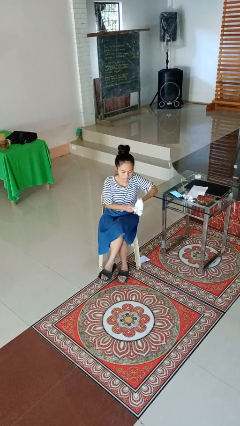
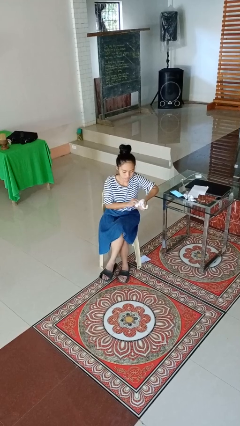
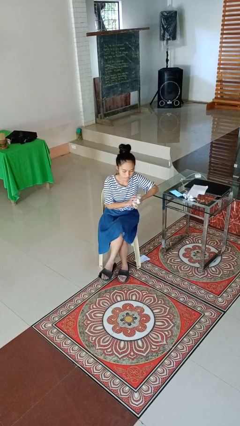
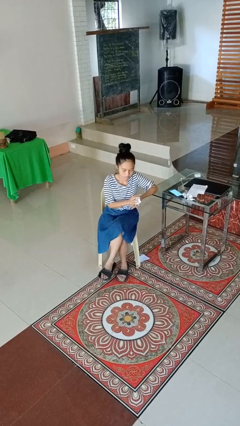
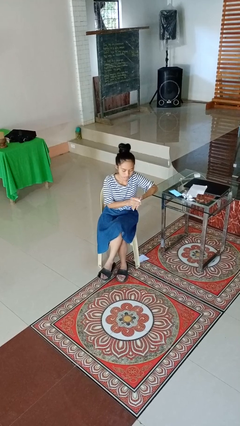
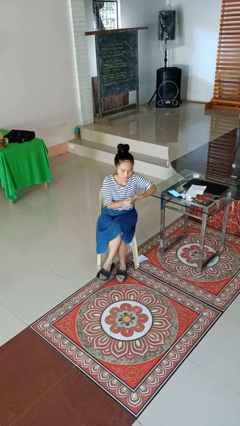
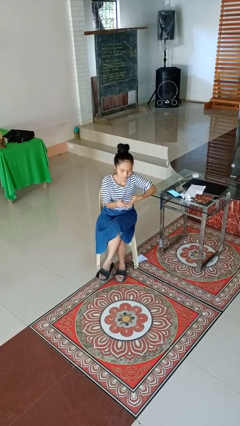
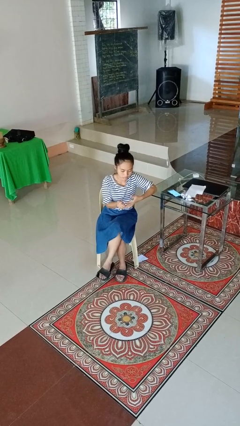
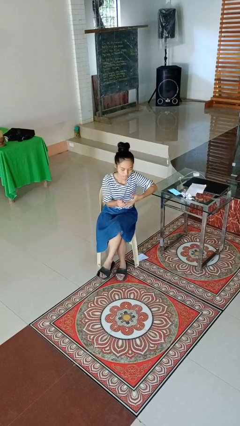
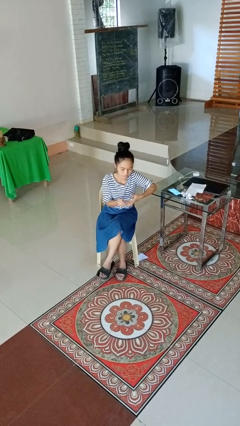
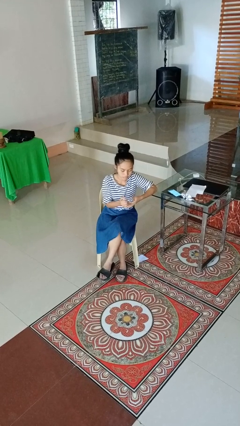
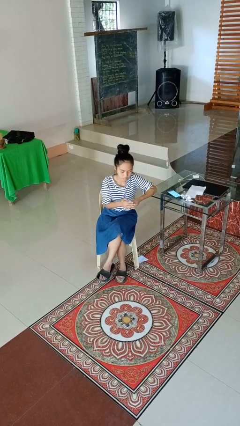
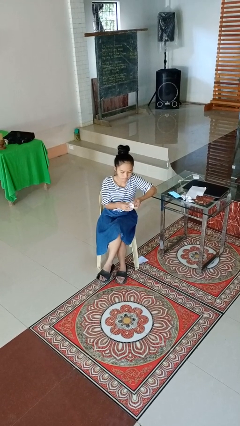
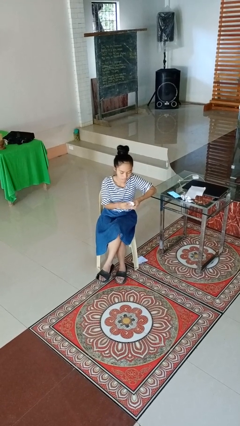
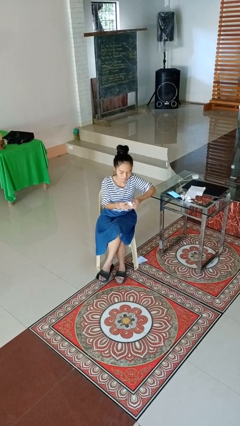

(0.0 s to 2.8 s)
person crumples paper

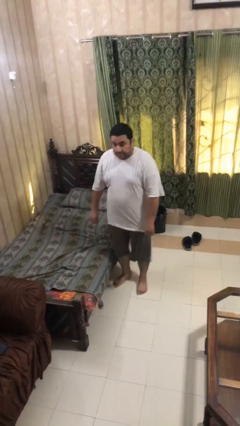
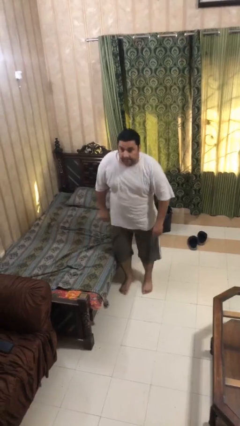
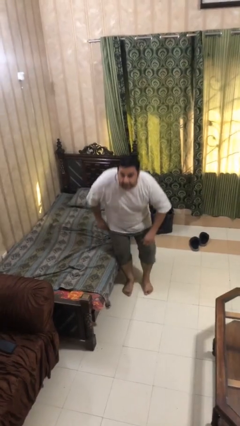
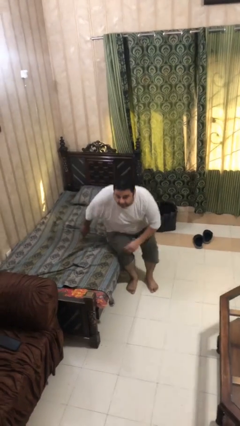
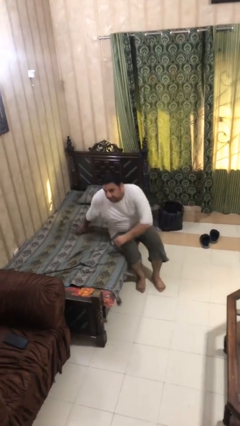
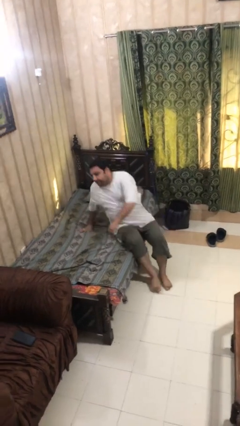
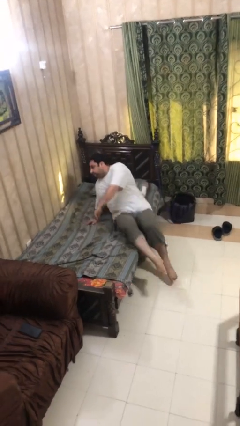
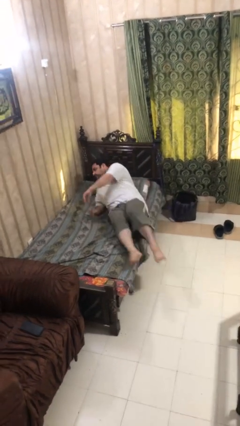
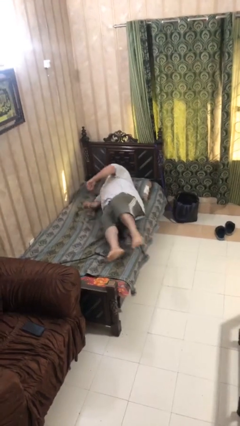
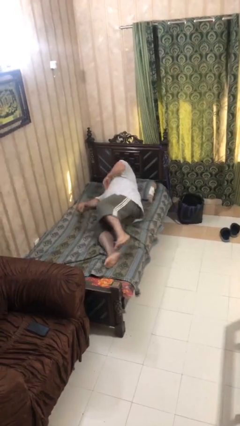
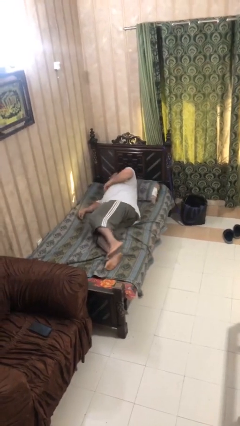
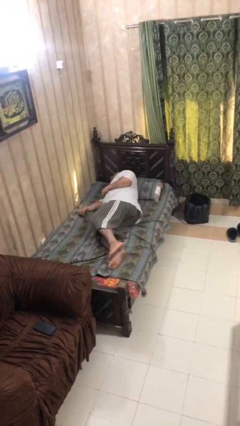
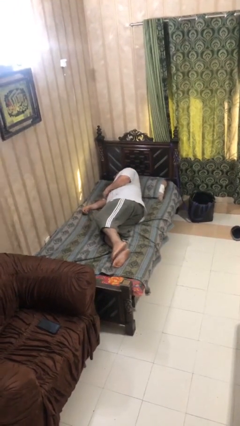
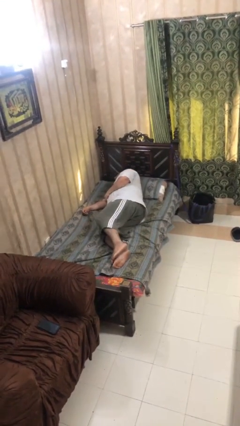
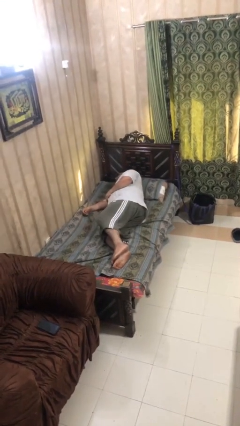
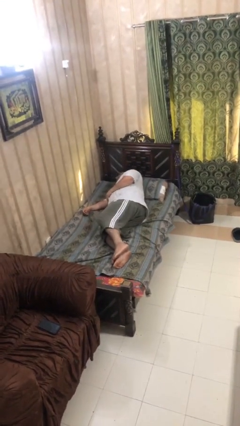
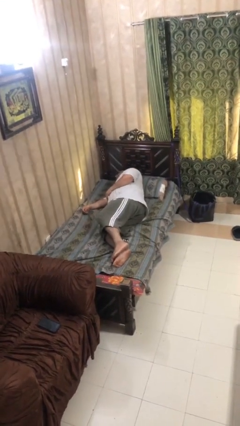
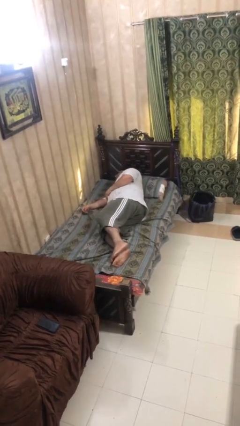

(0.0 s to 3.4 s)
person lies down on bed

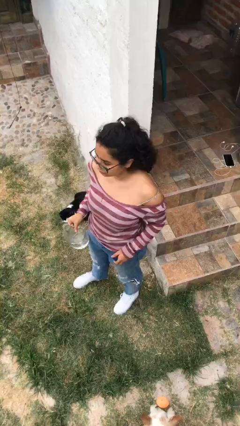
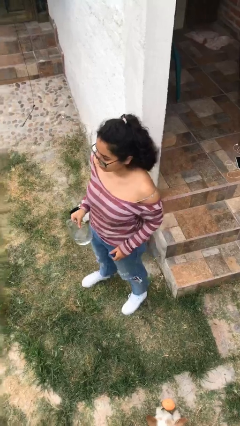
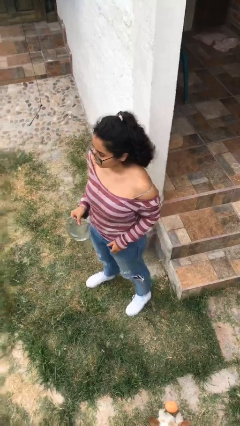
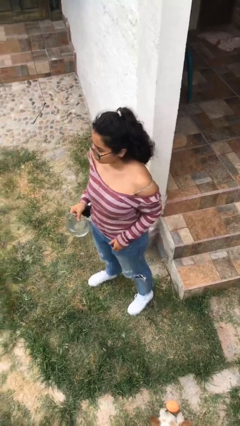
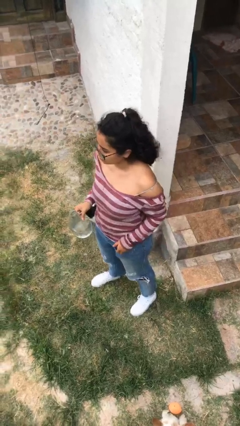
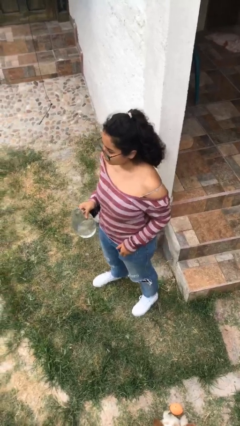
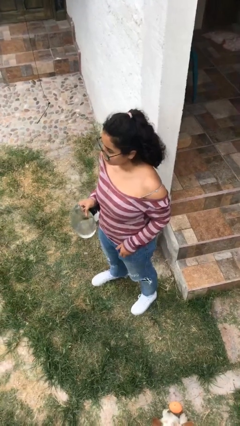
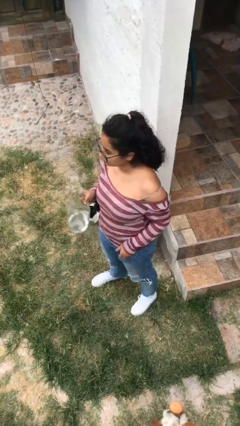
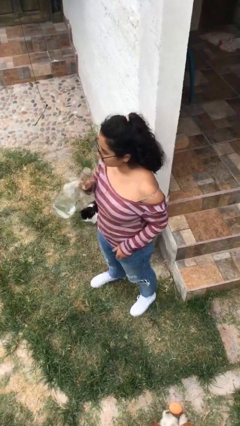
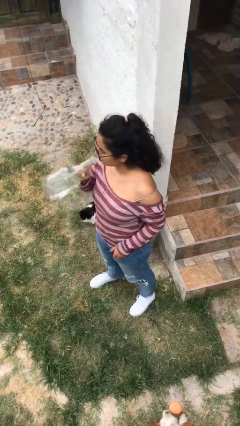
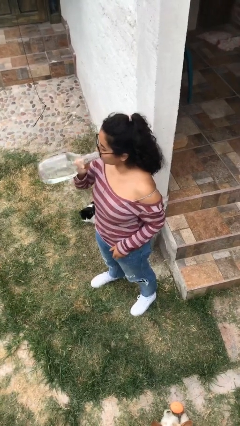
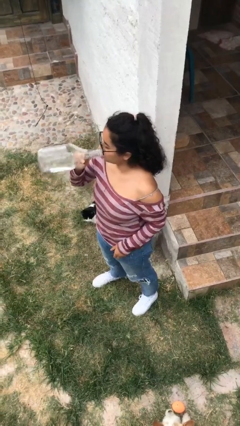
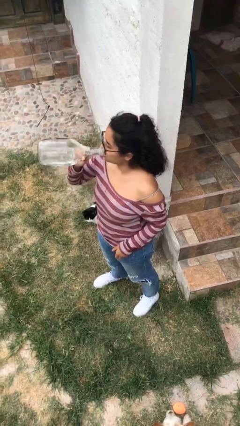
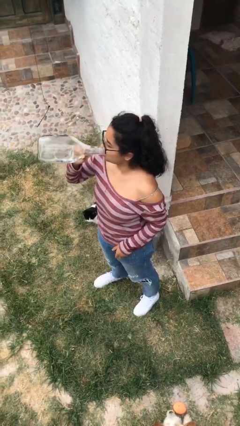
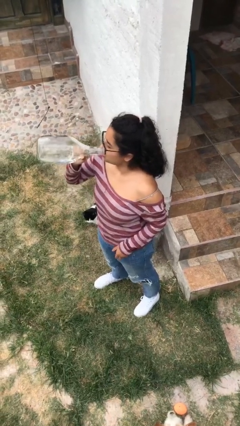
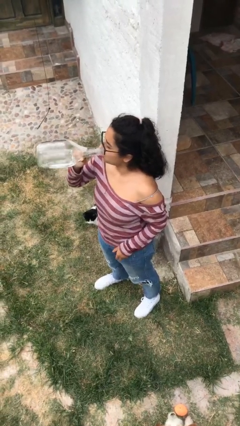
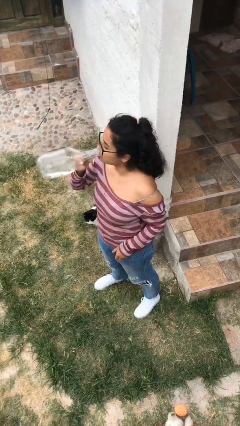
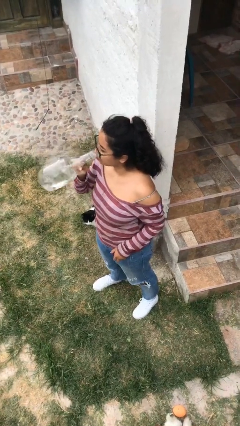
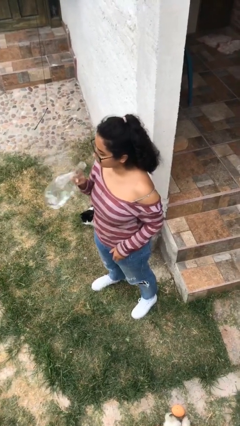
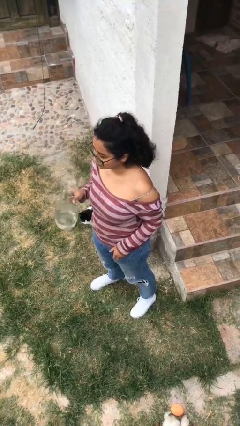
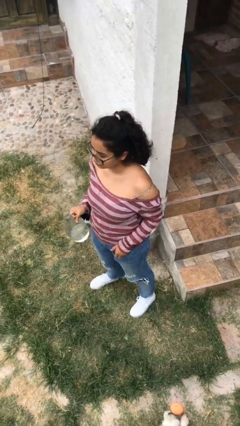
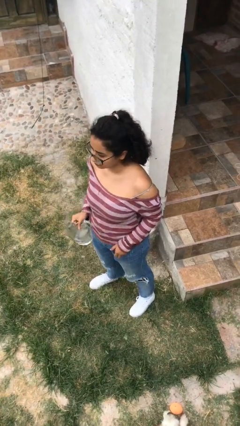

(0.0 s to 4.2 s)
person drinks from bottle

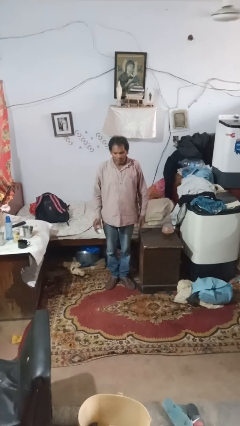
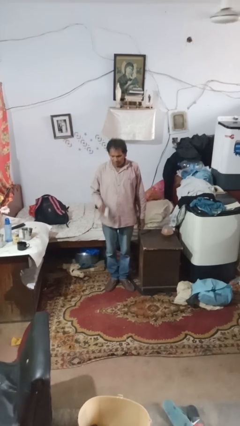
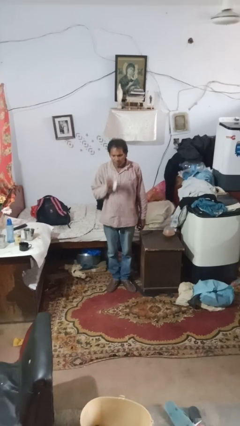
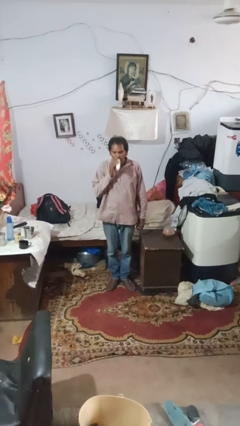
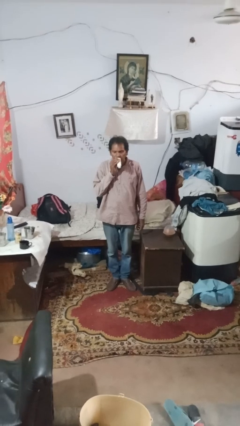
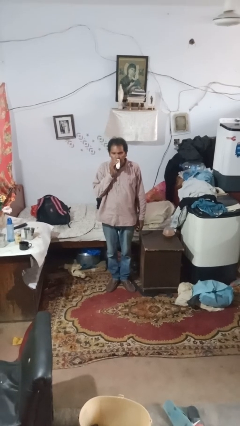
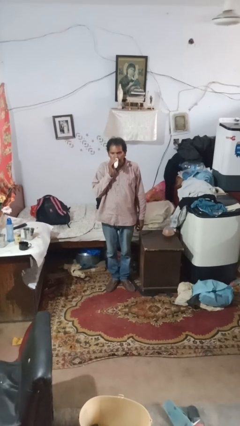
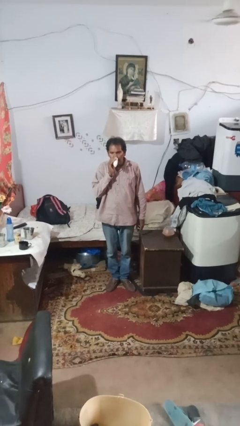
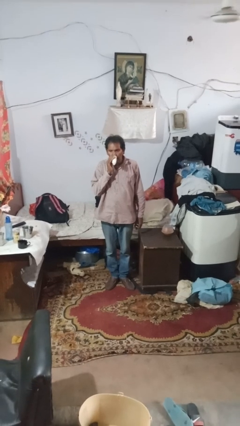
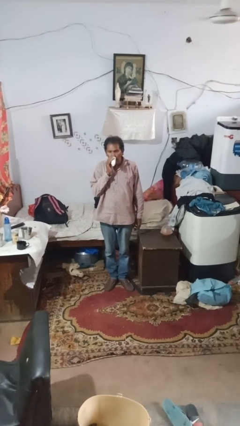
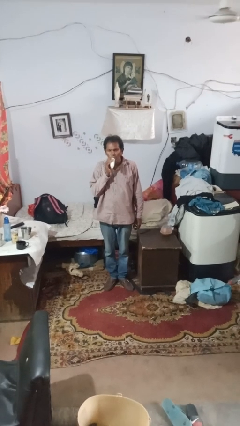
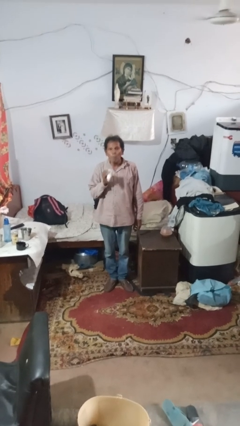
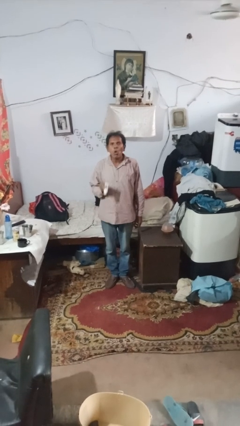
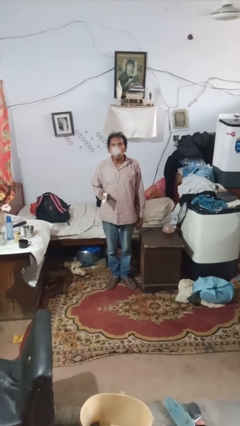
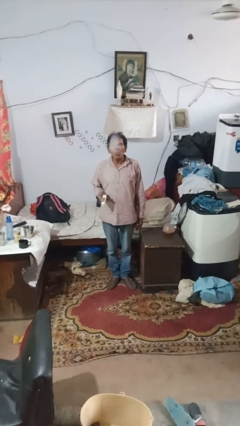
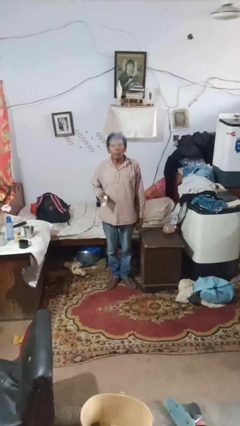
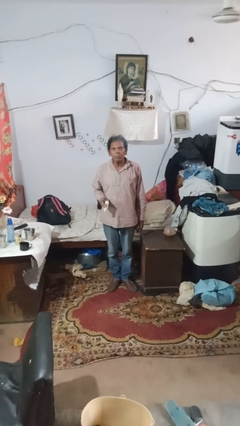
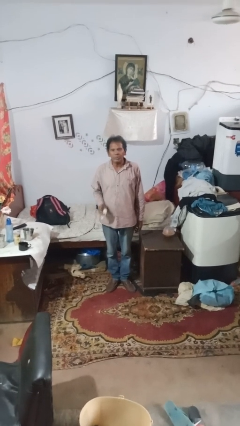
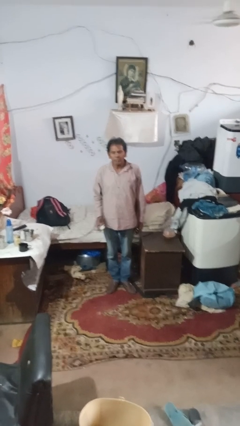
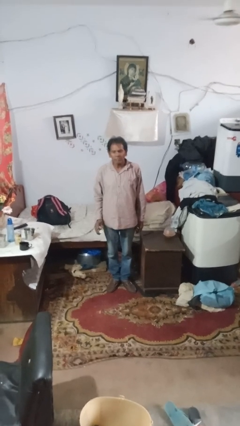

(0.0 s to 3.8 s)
person vapes

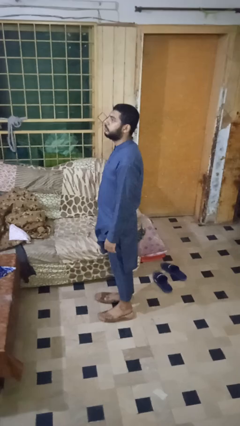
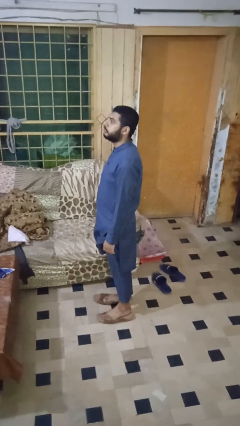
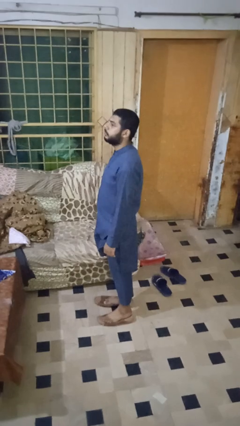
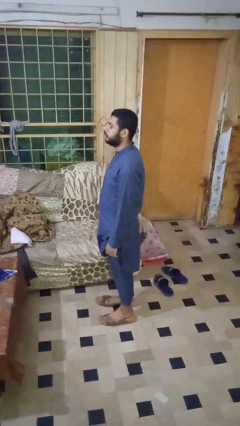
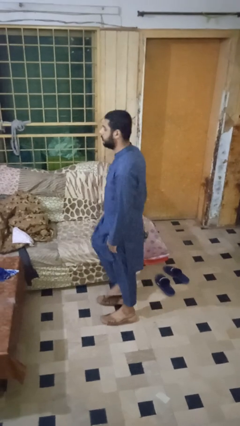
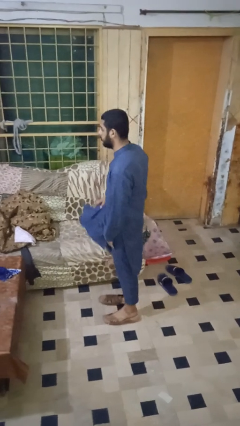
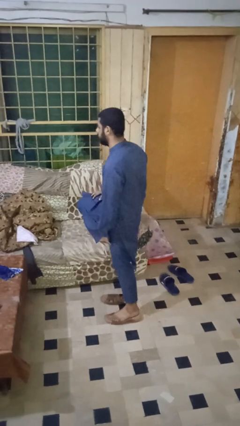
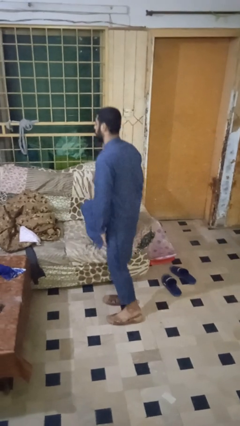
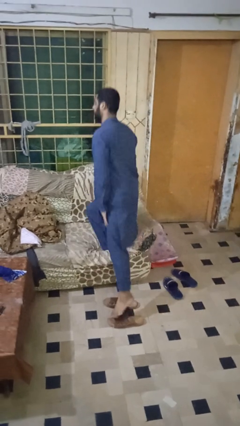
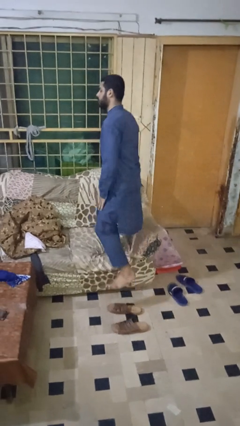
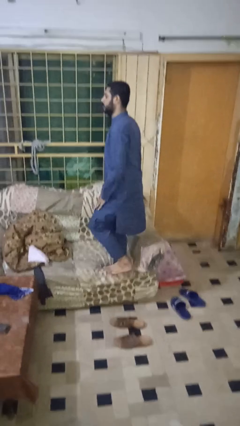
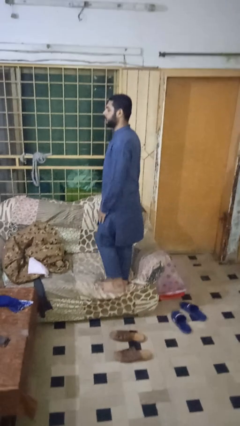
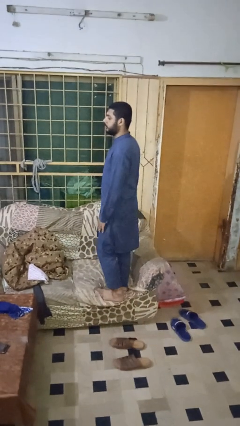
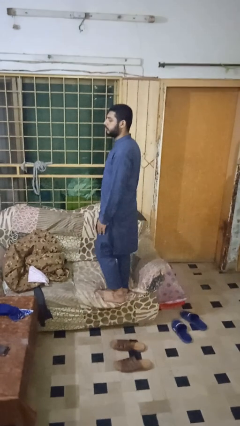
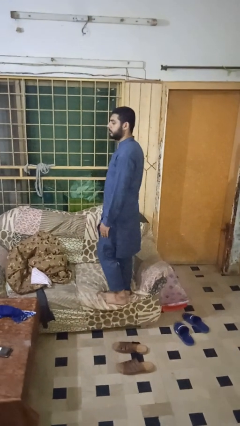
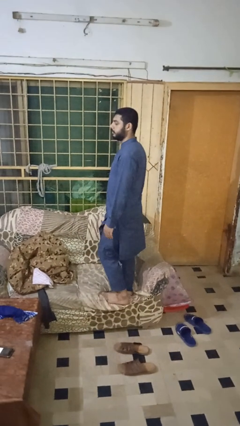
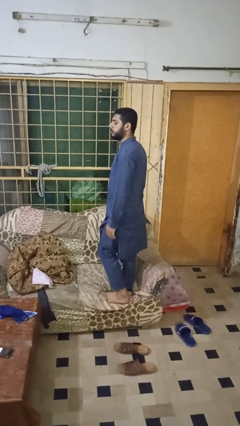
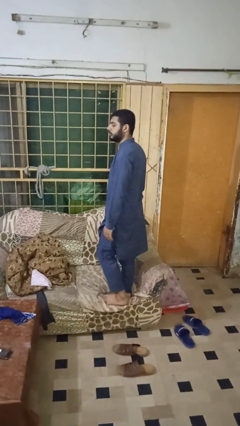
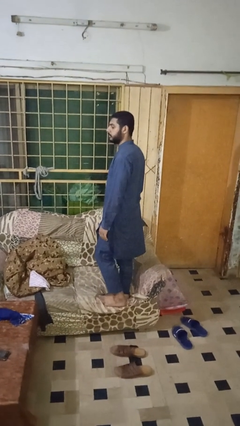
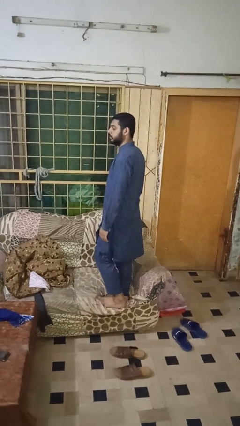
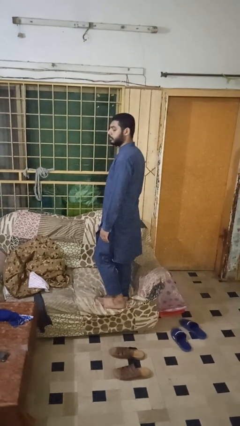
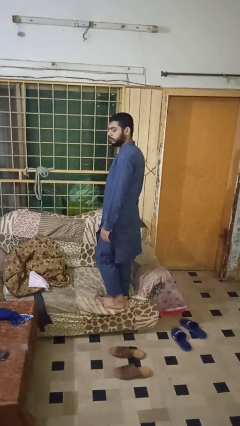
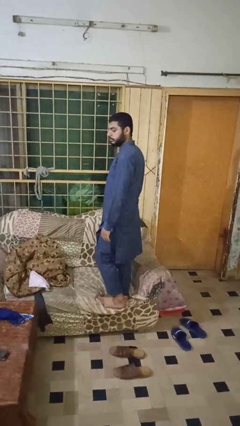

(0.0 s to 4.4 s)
person climbs on couch
